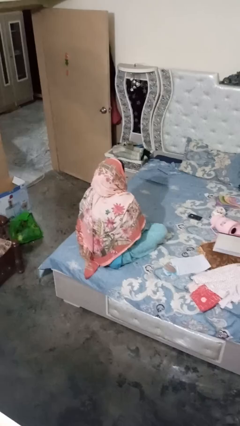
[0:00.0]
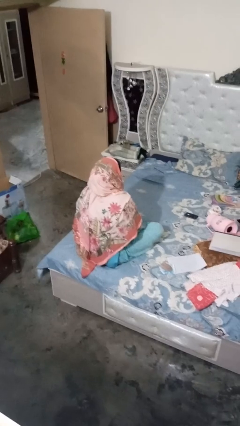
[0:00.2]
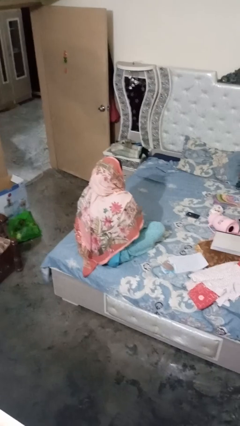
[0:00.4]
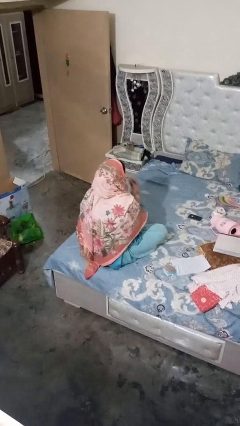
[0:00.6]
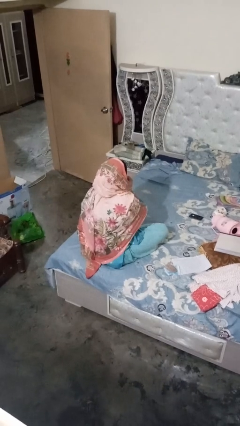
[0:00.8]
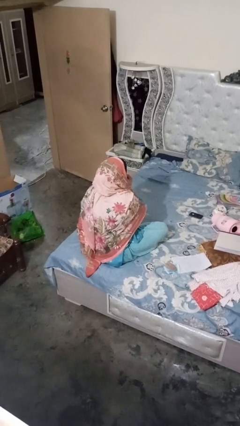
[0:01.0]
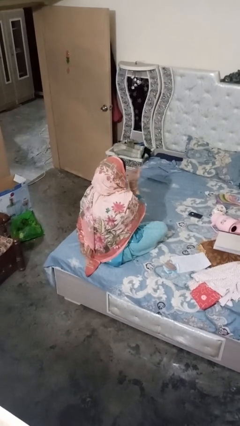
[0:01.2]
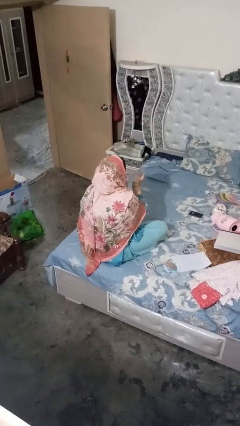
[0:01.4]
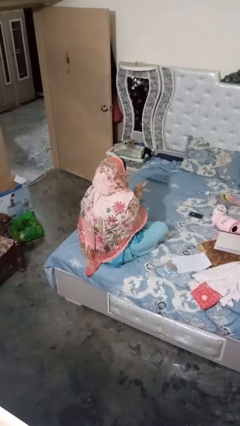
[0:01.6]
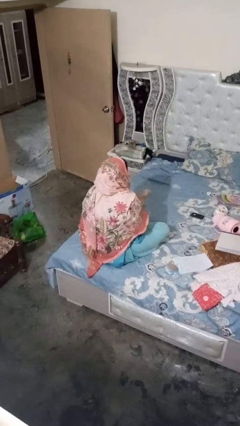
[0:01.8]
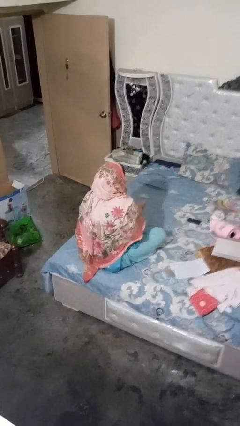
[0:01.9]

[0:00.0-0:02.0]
person gestures blow kiss

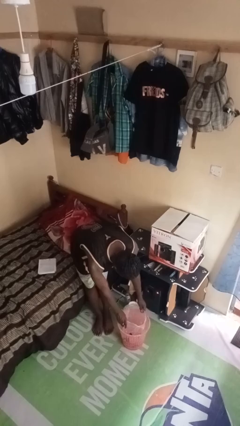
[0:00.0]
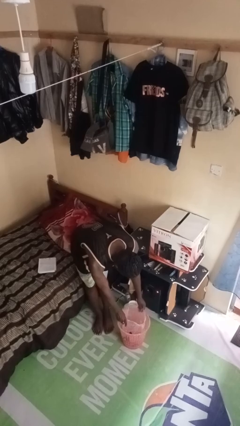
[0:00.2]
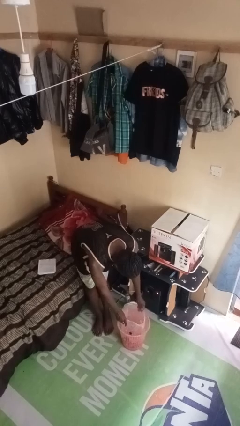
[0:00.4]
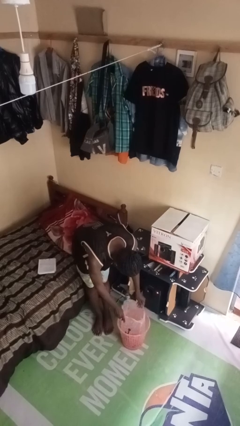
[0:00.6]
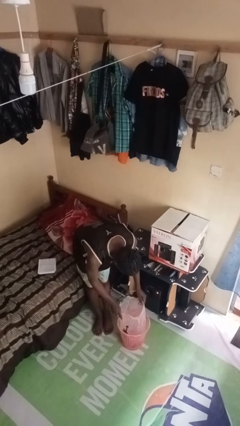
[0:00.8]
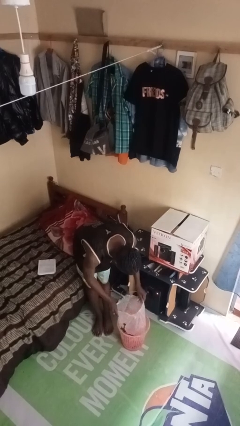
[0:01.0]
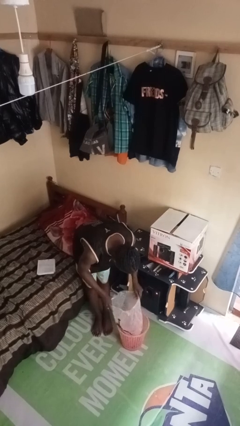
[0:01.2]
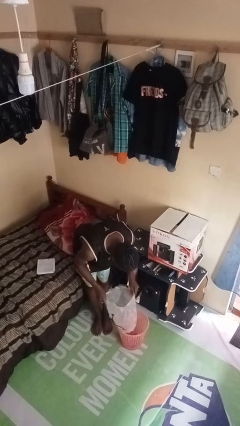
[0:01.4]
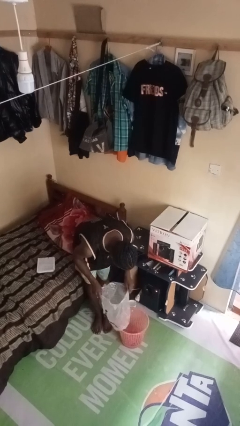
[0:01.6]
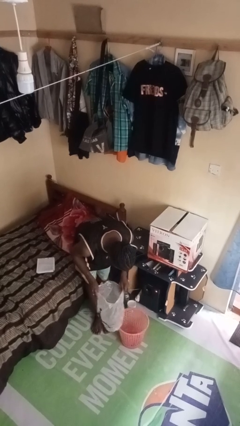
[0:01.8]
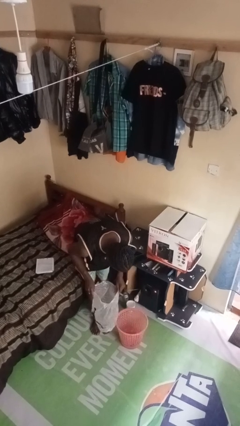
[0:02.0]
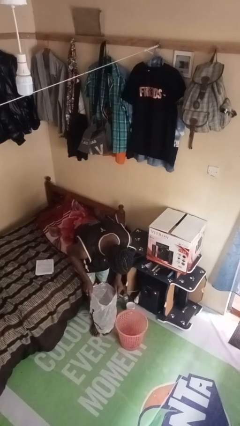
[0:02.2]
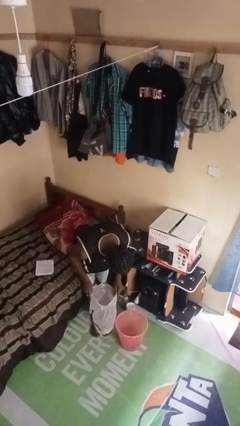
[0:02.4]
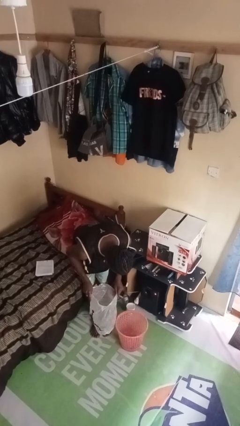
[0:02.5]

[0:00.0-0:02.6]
person removes trashbag from trashcan

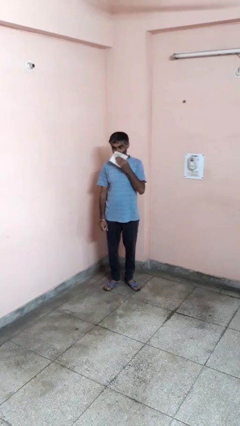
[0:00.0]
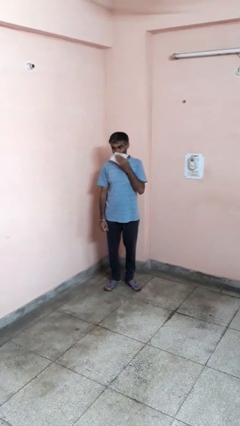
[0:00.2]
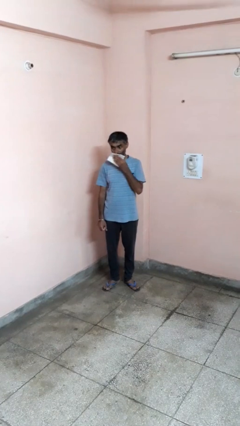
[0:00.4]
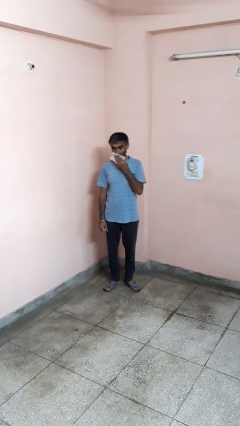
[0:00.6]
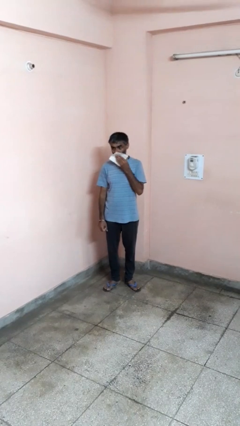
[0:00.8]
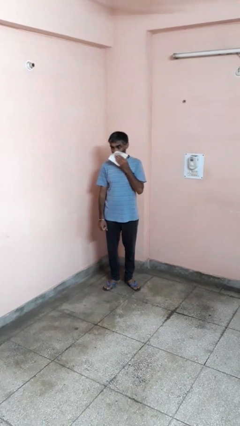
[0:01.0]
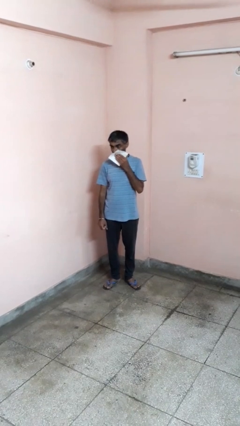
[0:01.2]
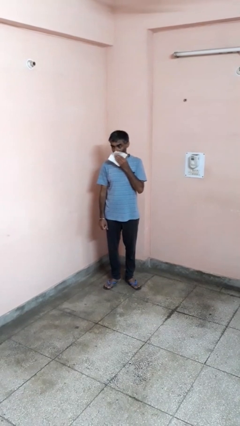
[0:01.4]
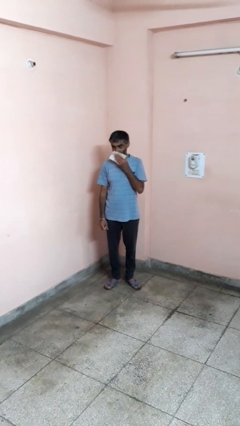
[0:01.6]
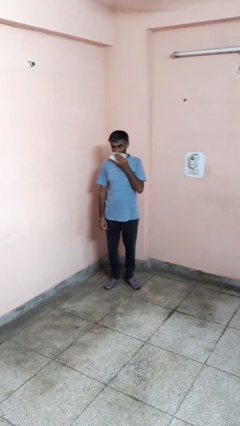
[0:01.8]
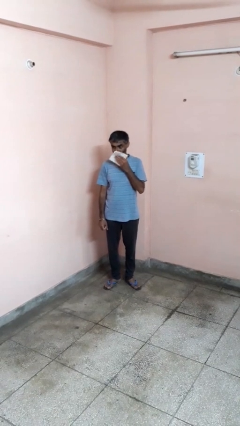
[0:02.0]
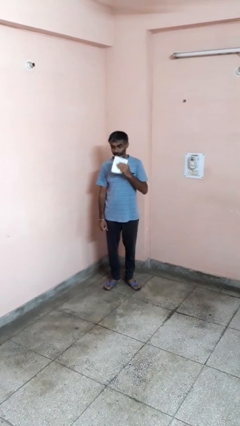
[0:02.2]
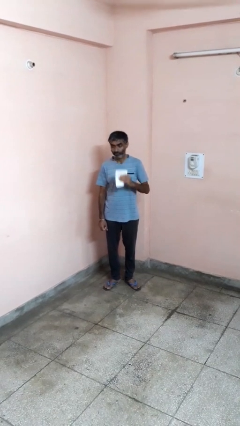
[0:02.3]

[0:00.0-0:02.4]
person wipes mouth with napkin

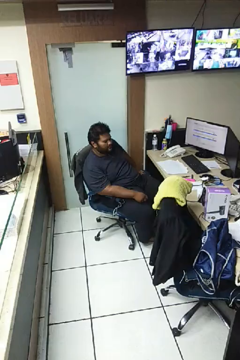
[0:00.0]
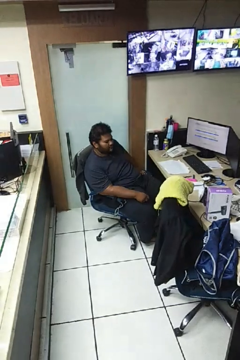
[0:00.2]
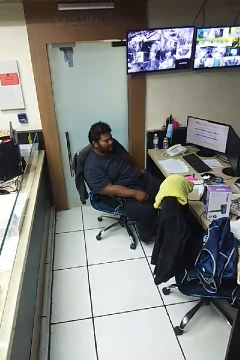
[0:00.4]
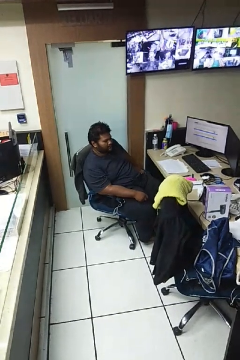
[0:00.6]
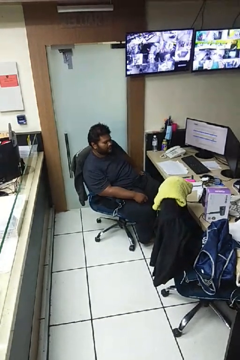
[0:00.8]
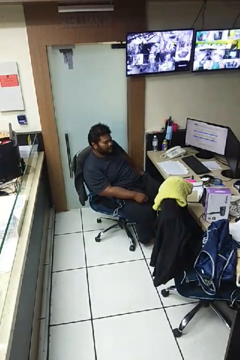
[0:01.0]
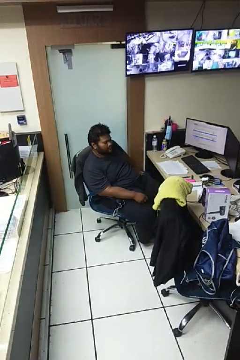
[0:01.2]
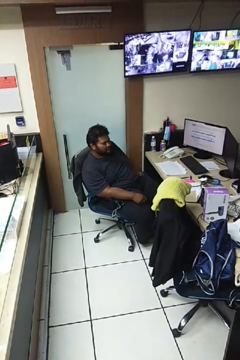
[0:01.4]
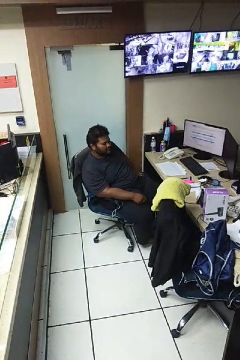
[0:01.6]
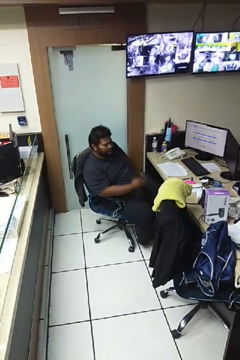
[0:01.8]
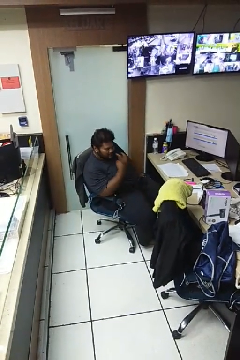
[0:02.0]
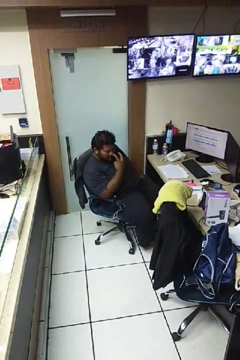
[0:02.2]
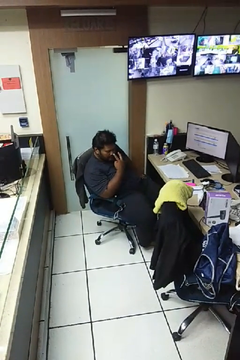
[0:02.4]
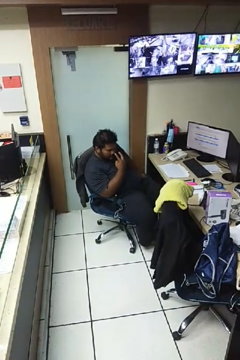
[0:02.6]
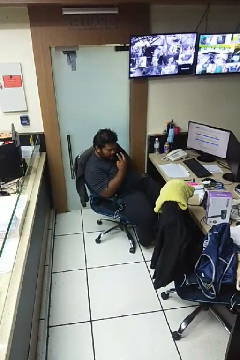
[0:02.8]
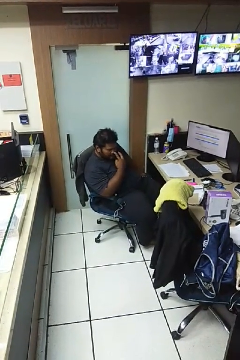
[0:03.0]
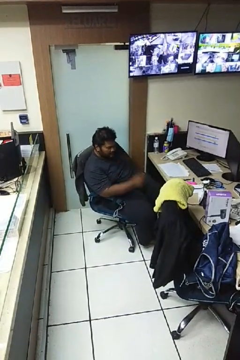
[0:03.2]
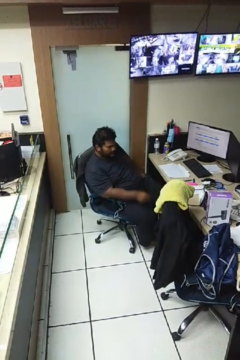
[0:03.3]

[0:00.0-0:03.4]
person gestures watch closely

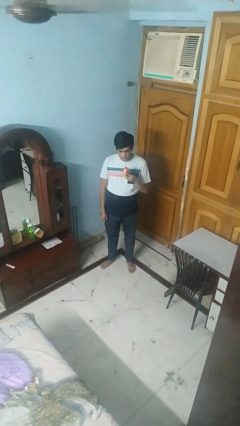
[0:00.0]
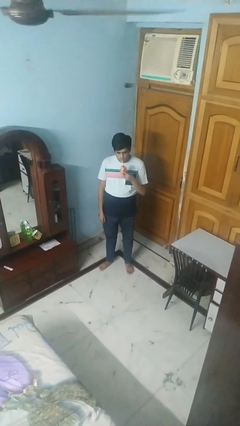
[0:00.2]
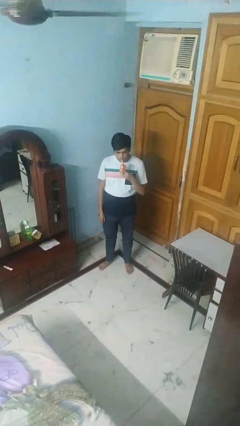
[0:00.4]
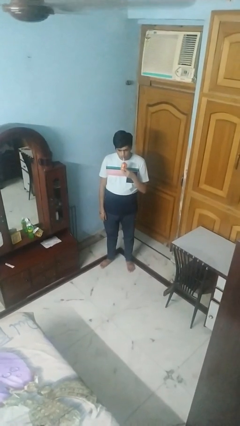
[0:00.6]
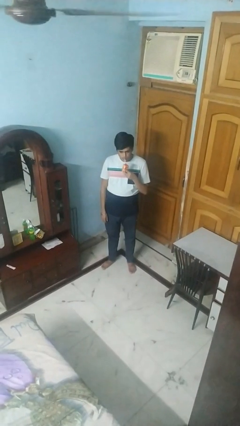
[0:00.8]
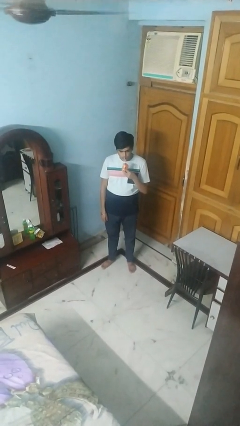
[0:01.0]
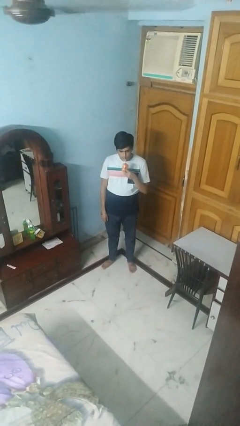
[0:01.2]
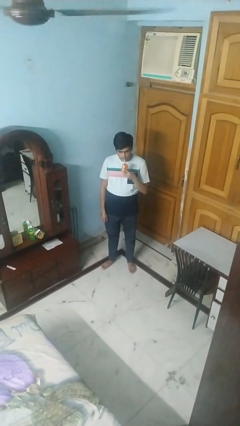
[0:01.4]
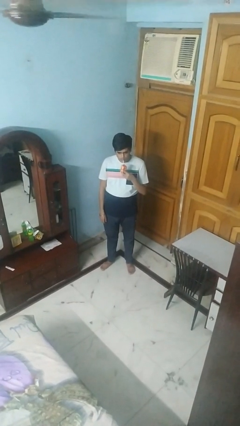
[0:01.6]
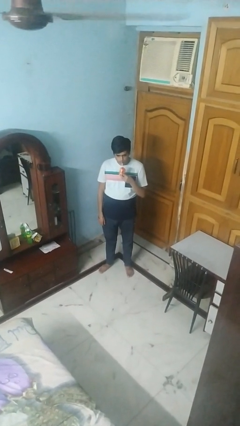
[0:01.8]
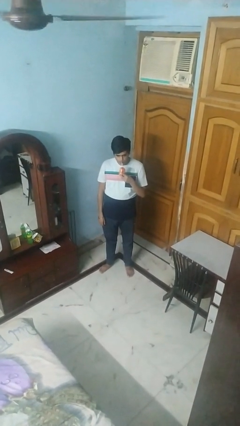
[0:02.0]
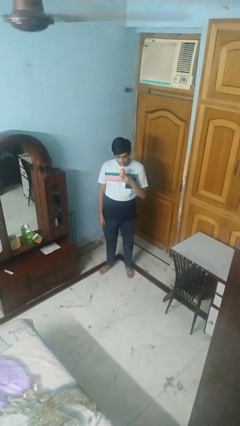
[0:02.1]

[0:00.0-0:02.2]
person drinks from straw

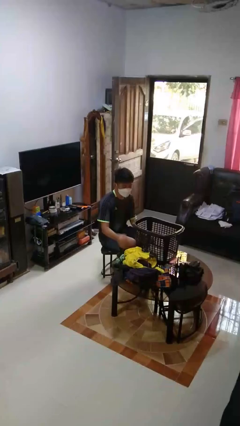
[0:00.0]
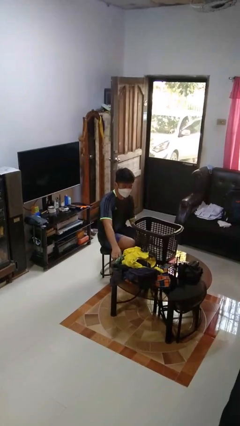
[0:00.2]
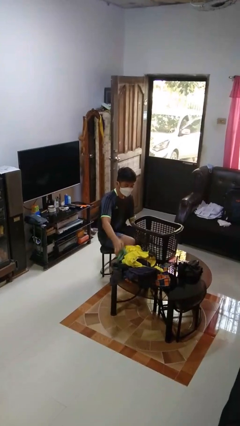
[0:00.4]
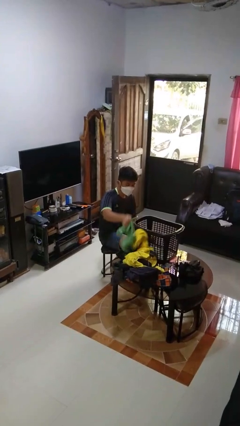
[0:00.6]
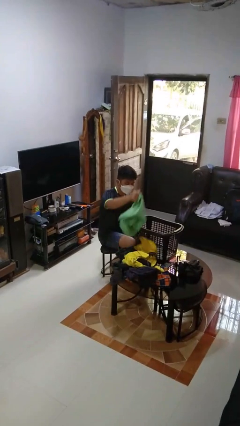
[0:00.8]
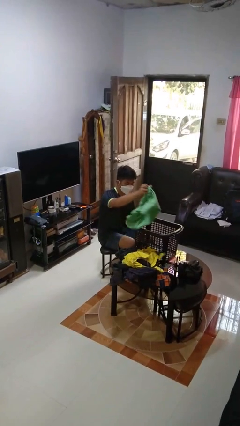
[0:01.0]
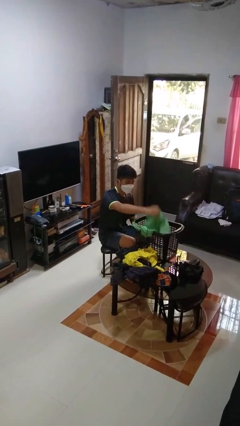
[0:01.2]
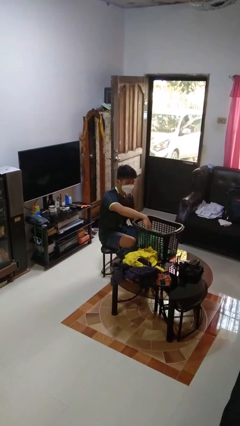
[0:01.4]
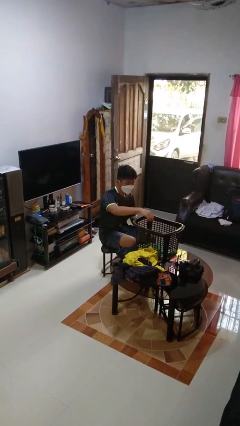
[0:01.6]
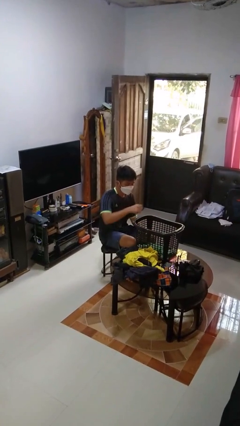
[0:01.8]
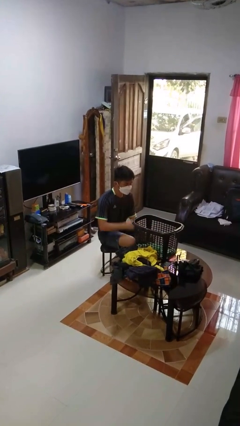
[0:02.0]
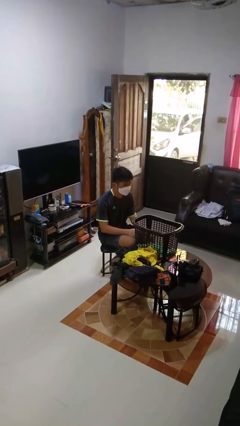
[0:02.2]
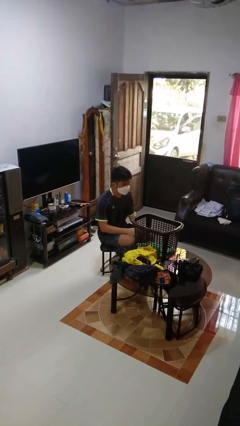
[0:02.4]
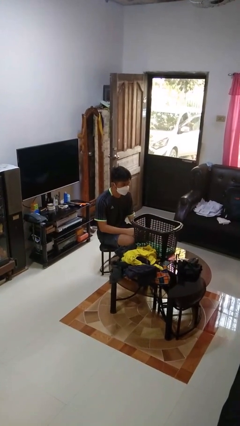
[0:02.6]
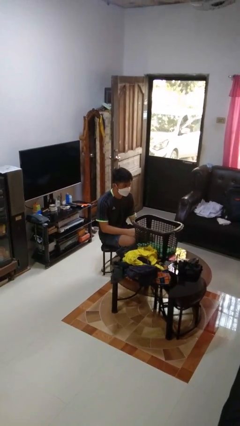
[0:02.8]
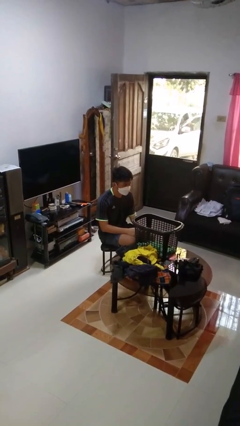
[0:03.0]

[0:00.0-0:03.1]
person puts object into basket

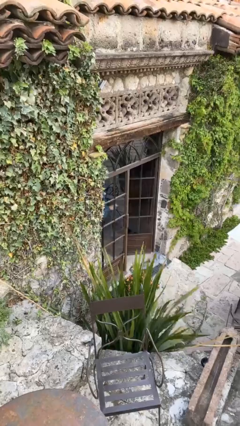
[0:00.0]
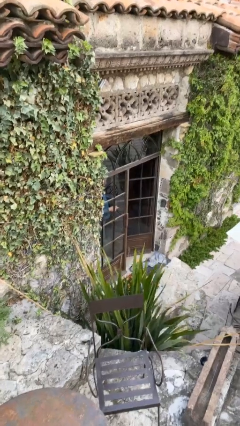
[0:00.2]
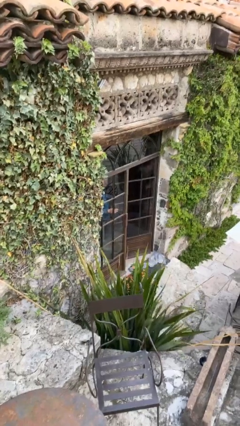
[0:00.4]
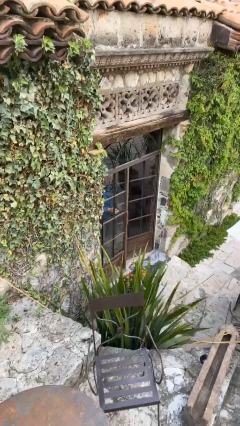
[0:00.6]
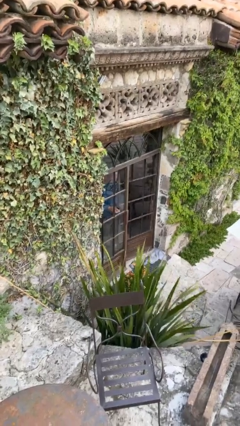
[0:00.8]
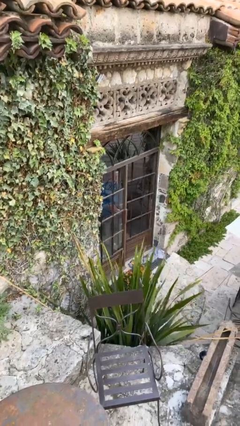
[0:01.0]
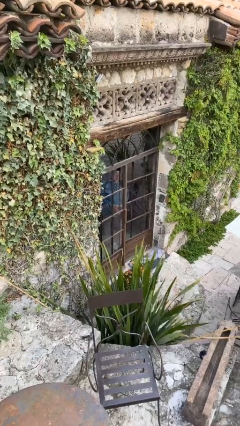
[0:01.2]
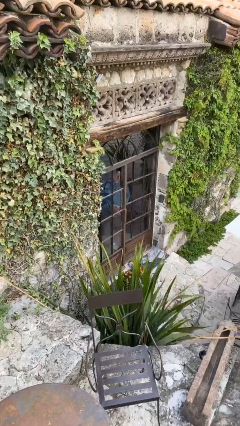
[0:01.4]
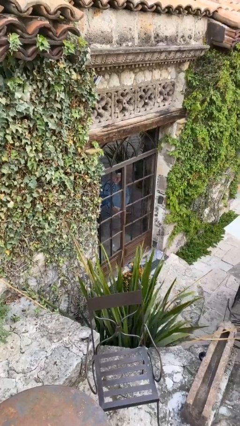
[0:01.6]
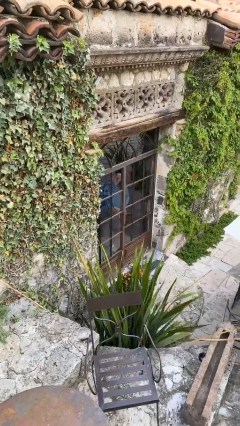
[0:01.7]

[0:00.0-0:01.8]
person closes facility door

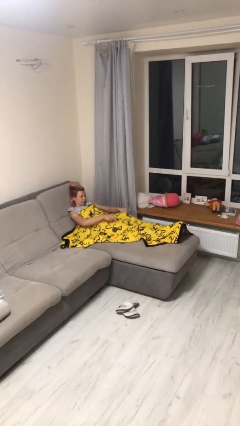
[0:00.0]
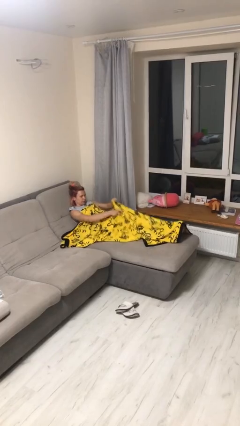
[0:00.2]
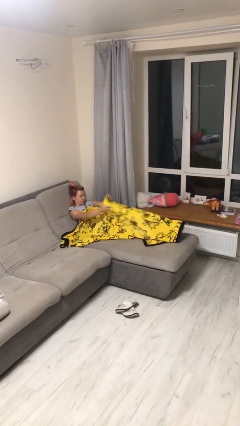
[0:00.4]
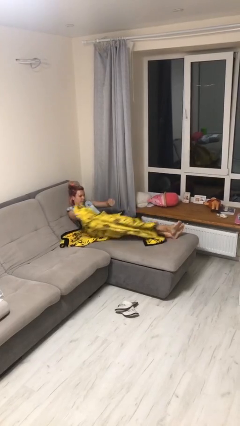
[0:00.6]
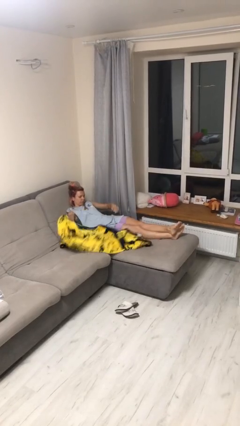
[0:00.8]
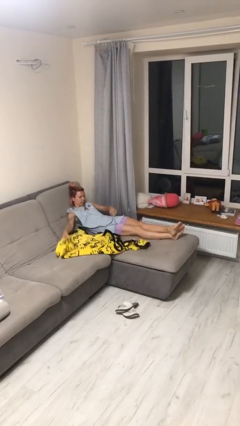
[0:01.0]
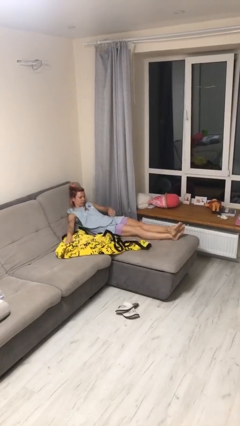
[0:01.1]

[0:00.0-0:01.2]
person uncovers with blanket
